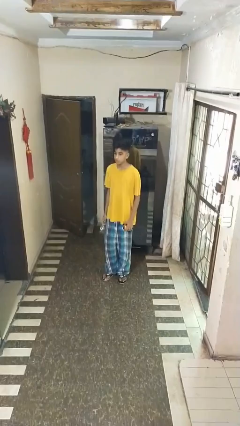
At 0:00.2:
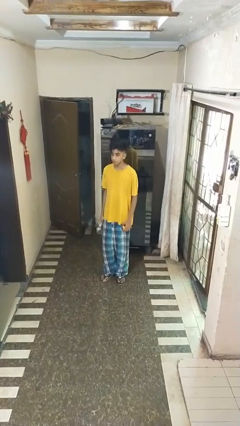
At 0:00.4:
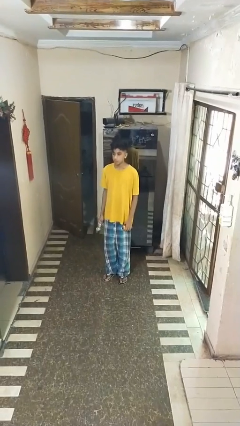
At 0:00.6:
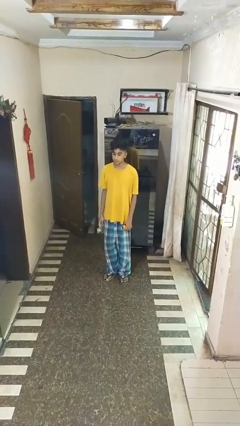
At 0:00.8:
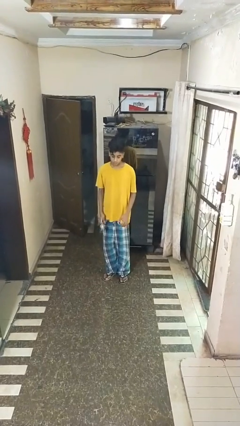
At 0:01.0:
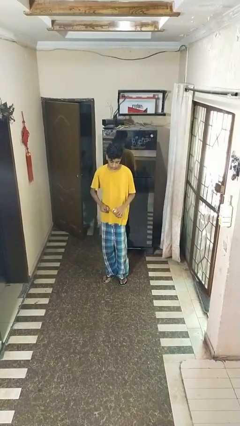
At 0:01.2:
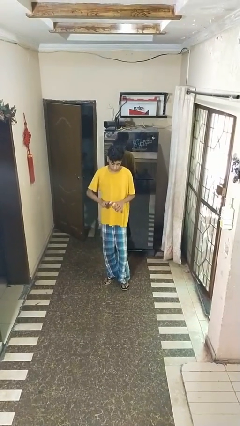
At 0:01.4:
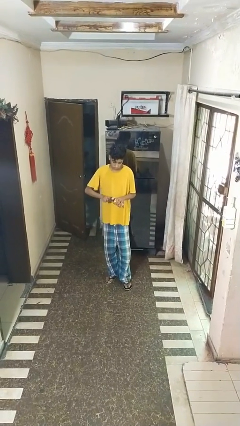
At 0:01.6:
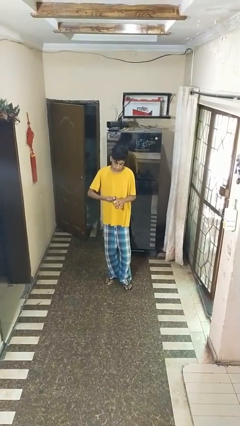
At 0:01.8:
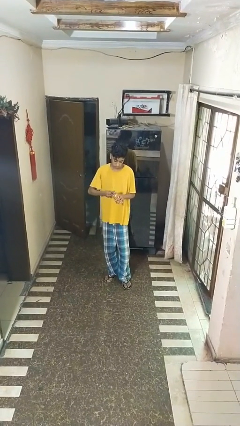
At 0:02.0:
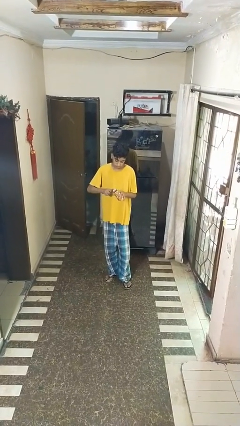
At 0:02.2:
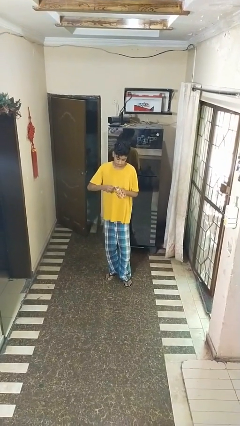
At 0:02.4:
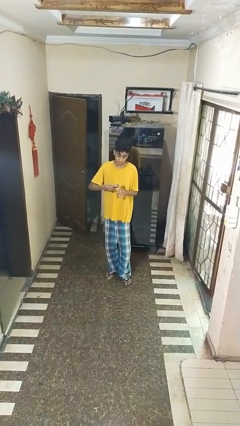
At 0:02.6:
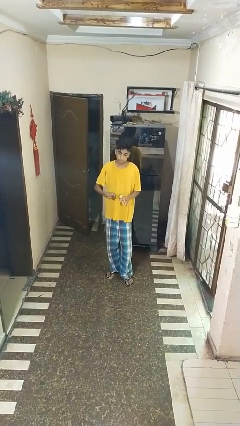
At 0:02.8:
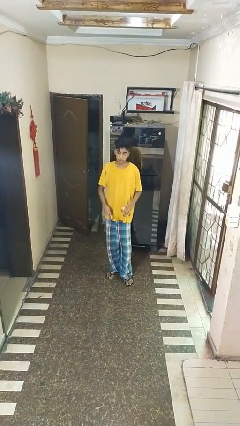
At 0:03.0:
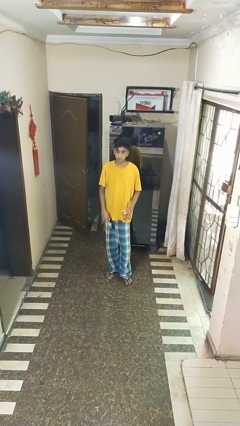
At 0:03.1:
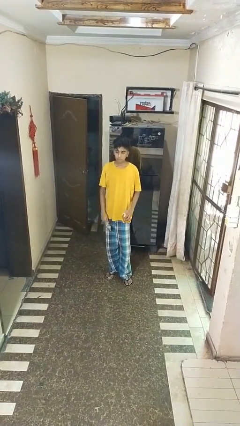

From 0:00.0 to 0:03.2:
person opens can with can opener

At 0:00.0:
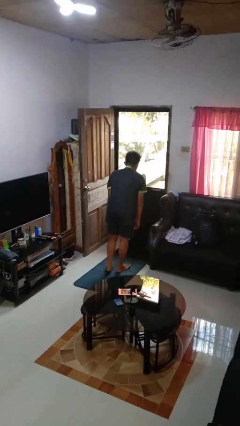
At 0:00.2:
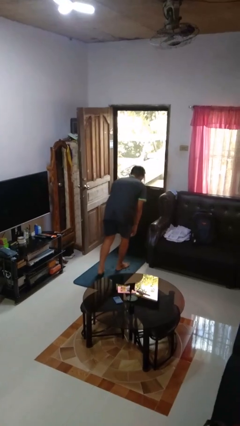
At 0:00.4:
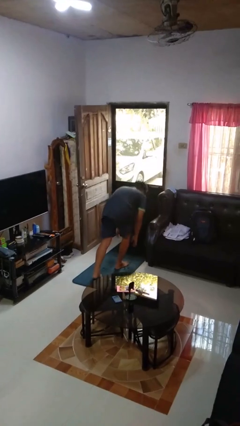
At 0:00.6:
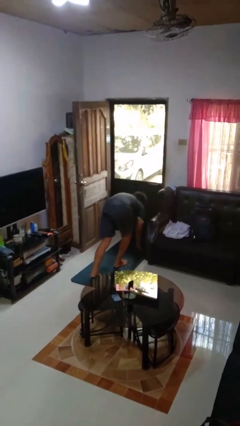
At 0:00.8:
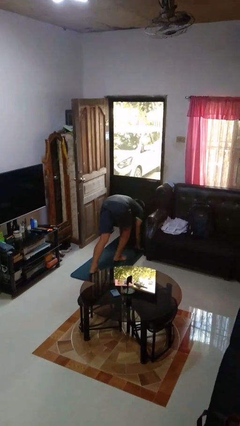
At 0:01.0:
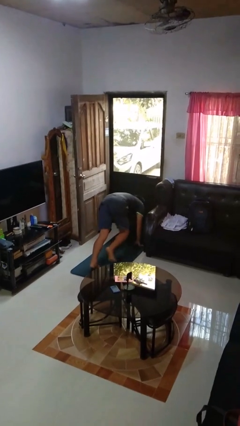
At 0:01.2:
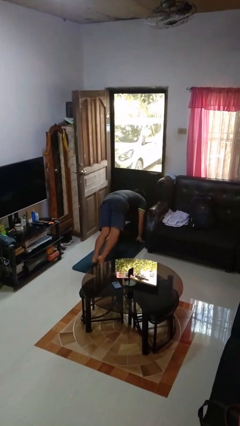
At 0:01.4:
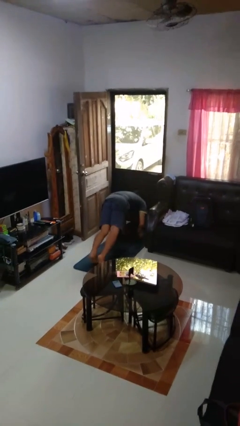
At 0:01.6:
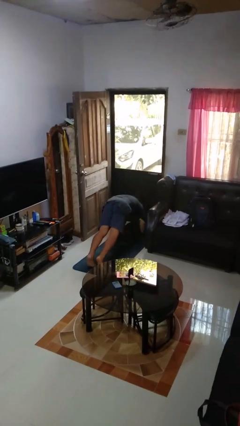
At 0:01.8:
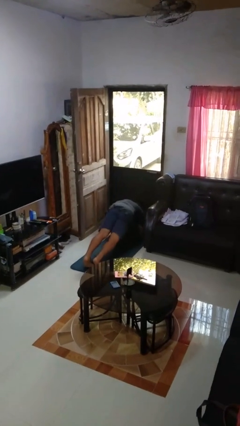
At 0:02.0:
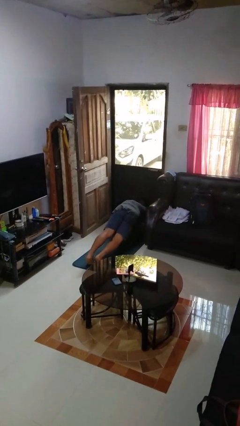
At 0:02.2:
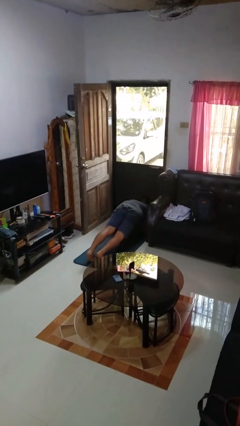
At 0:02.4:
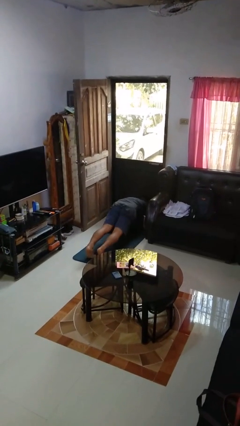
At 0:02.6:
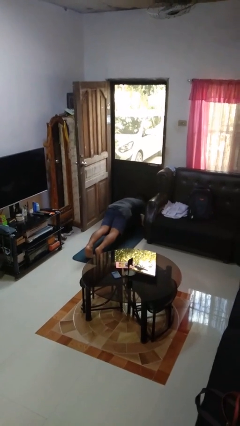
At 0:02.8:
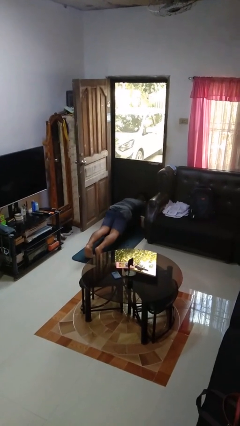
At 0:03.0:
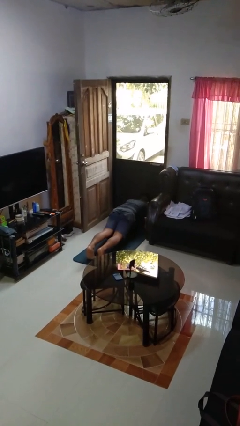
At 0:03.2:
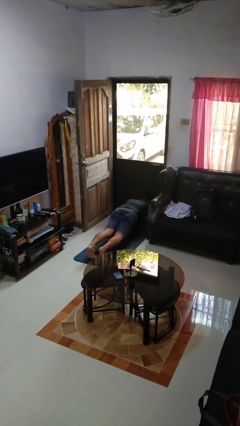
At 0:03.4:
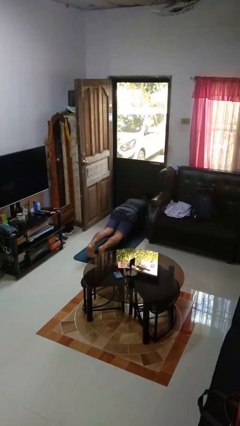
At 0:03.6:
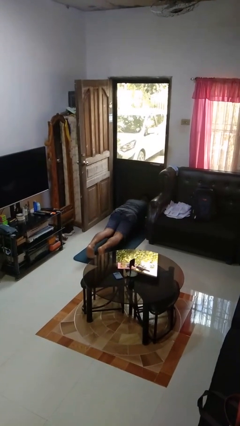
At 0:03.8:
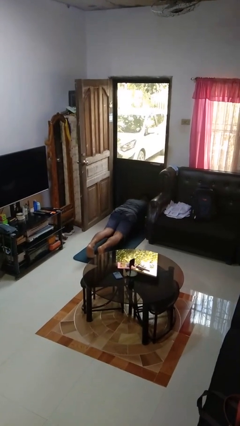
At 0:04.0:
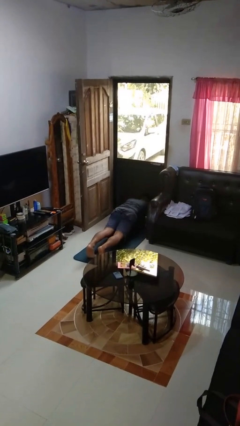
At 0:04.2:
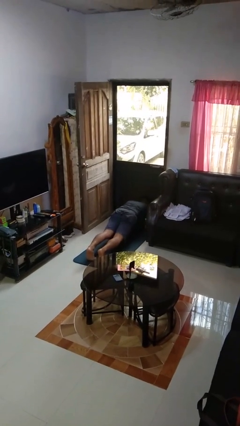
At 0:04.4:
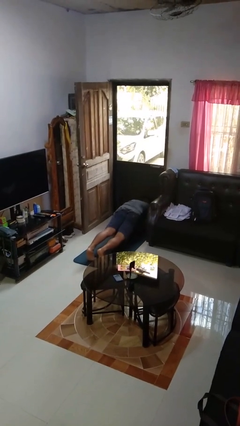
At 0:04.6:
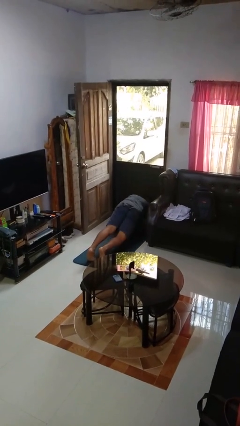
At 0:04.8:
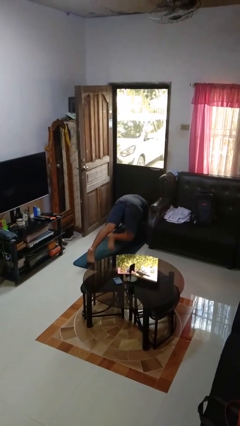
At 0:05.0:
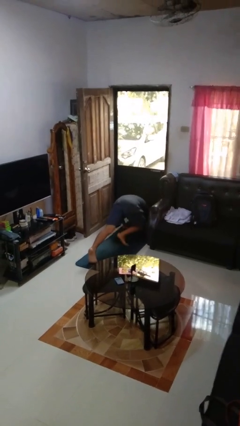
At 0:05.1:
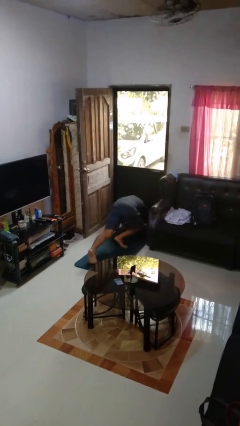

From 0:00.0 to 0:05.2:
person exercises with plank

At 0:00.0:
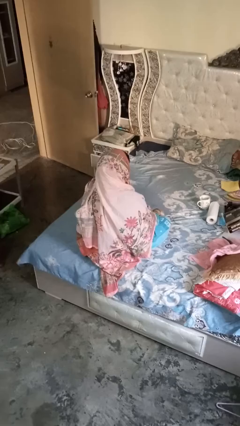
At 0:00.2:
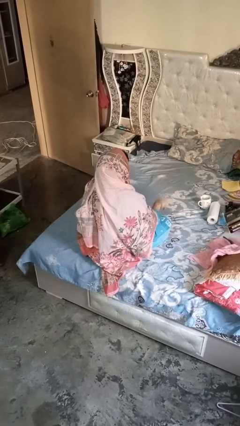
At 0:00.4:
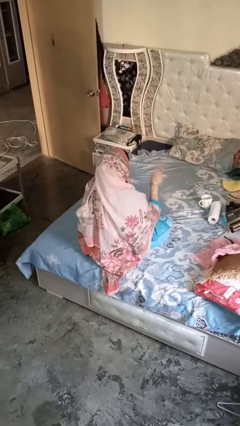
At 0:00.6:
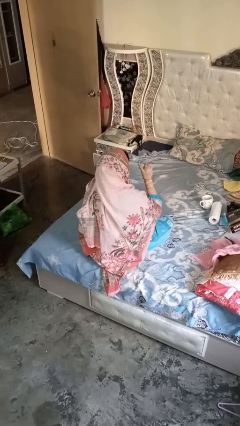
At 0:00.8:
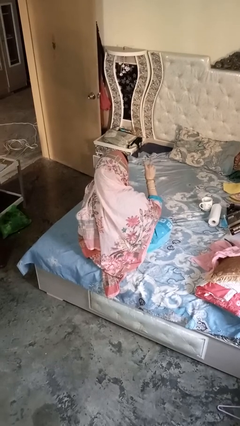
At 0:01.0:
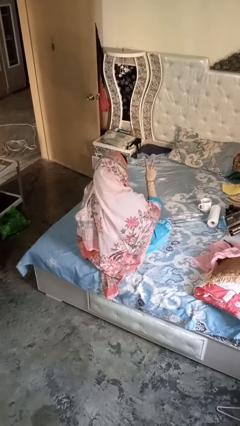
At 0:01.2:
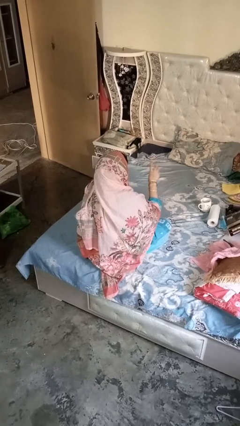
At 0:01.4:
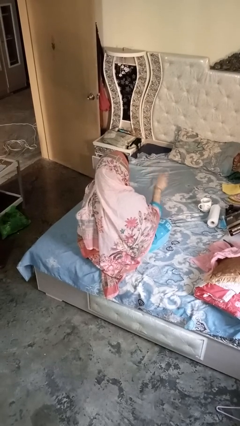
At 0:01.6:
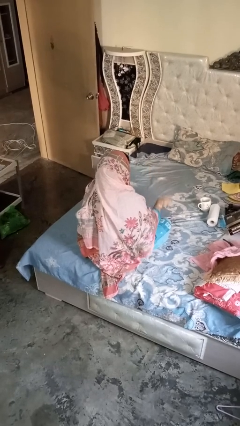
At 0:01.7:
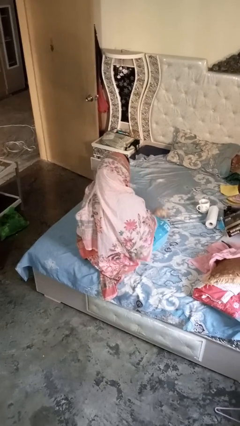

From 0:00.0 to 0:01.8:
person gestures be quiet

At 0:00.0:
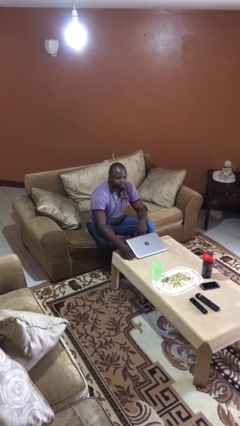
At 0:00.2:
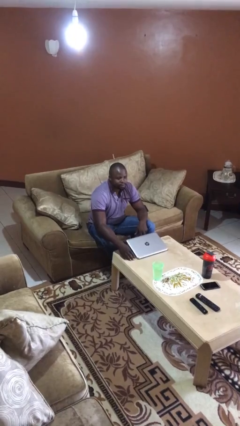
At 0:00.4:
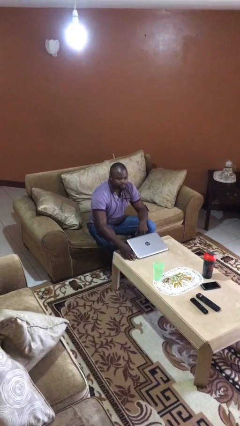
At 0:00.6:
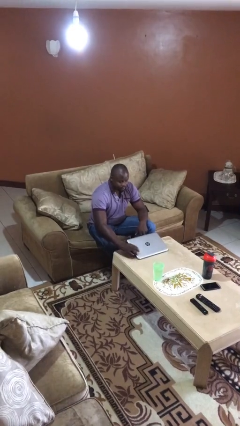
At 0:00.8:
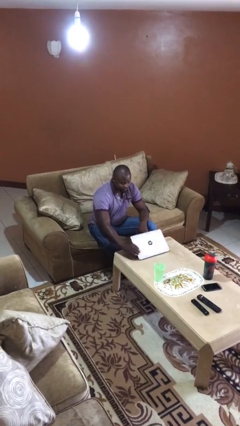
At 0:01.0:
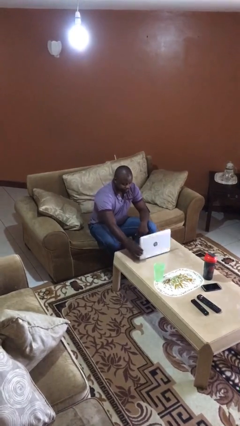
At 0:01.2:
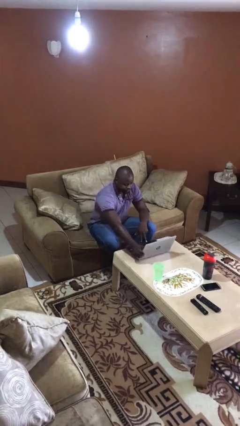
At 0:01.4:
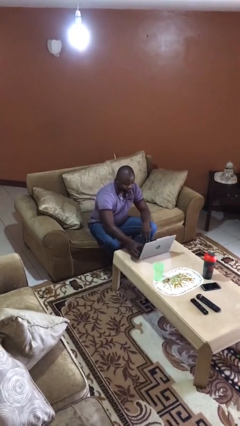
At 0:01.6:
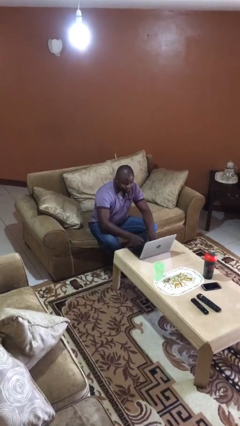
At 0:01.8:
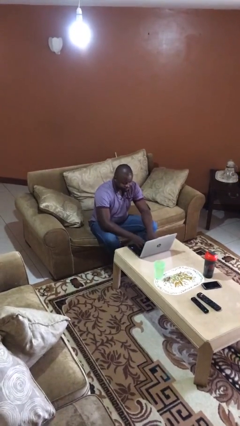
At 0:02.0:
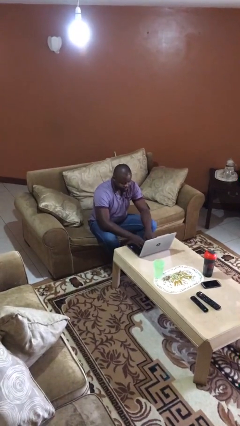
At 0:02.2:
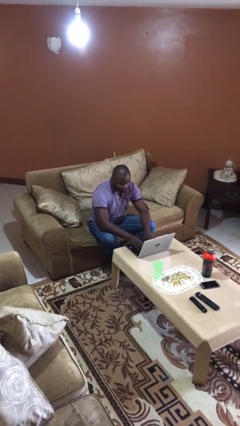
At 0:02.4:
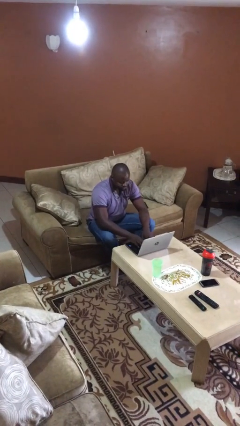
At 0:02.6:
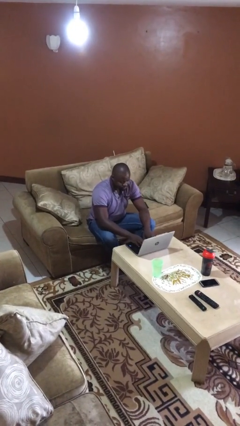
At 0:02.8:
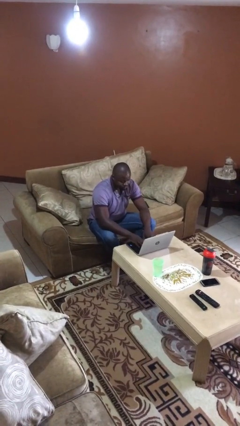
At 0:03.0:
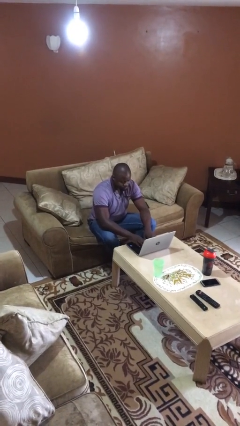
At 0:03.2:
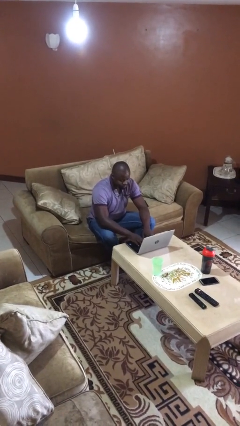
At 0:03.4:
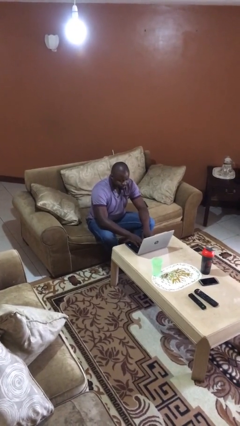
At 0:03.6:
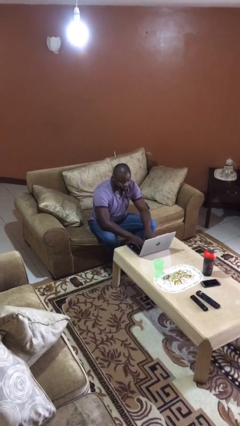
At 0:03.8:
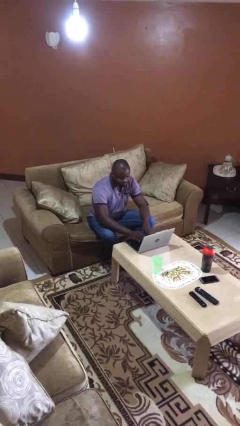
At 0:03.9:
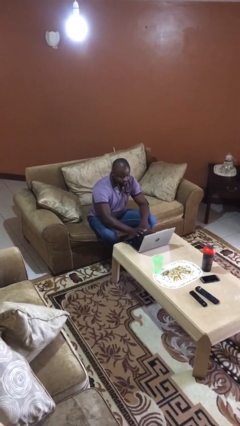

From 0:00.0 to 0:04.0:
person interacts with laptop

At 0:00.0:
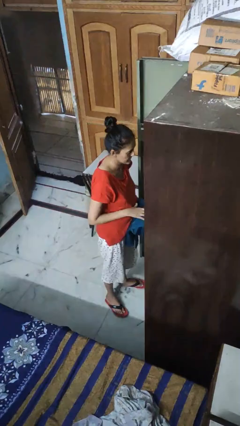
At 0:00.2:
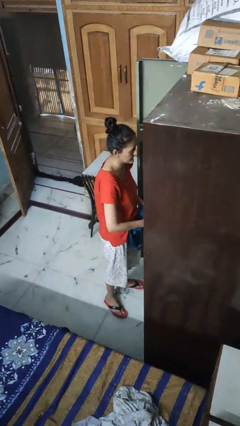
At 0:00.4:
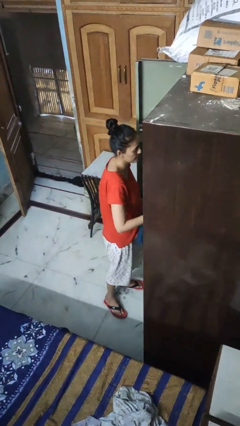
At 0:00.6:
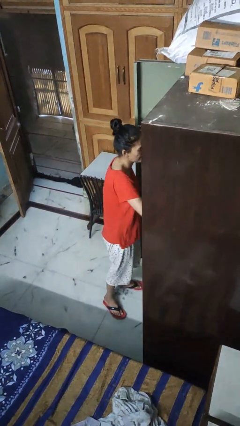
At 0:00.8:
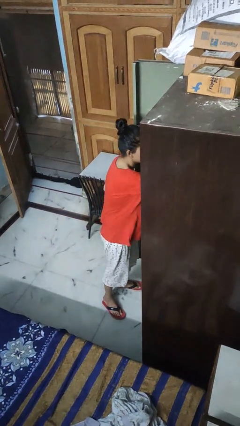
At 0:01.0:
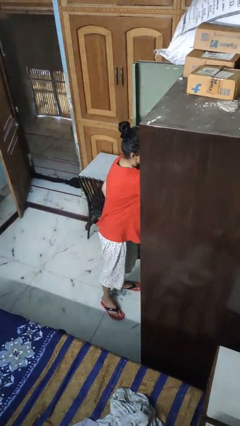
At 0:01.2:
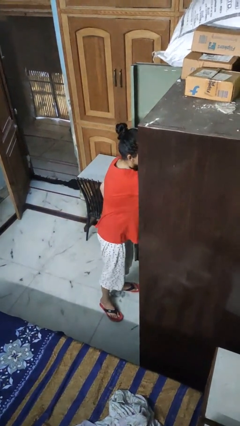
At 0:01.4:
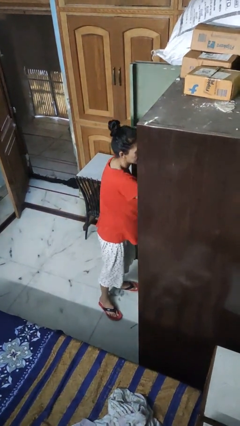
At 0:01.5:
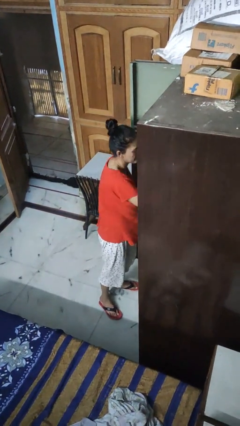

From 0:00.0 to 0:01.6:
person puts clothes into dresser

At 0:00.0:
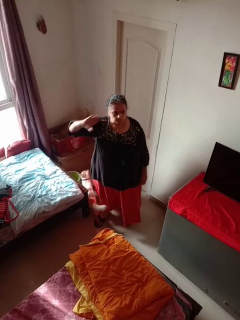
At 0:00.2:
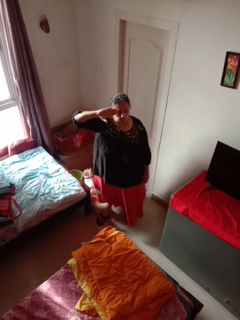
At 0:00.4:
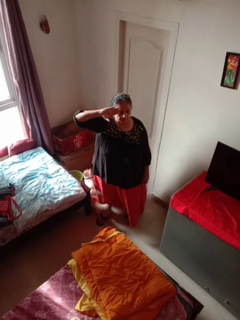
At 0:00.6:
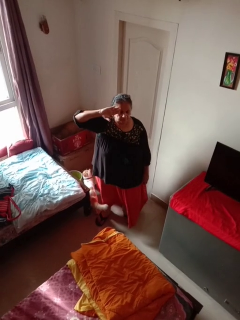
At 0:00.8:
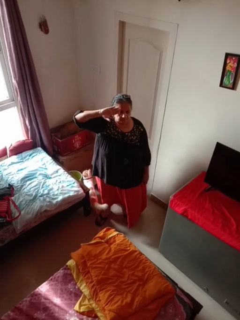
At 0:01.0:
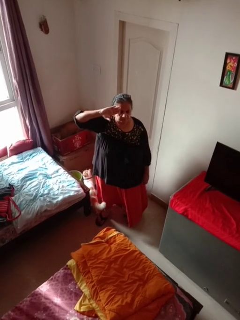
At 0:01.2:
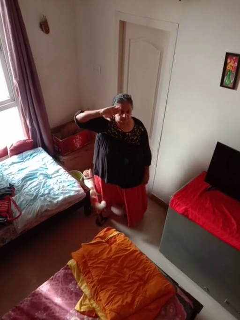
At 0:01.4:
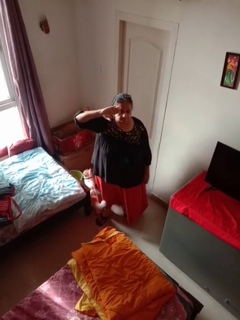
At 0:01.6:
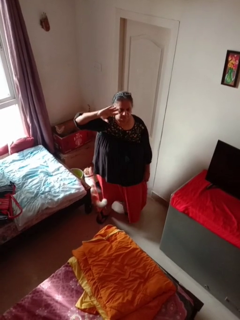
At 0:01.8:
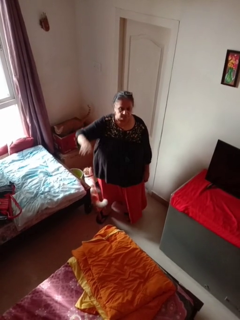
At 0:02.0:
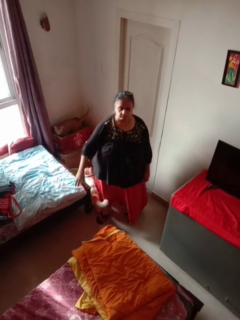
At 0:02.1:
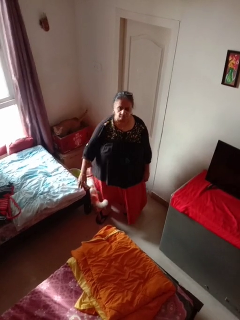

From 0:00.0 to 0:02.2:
person salutes
